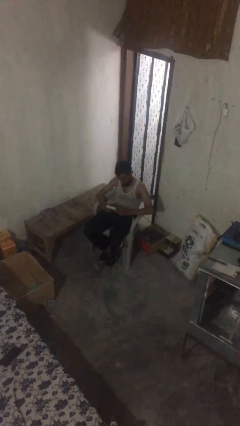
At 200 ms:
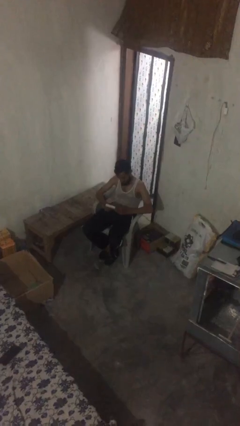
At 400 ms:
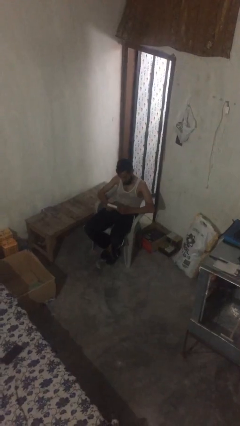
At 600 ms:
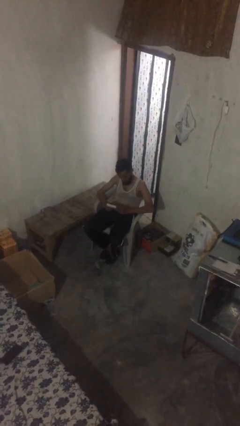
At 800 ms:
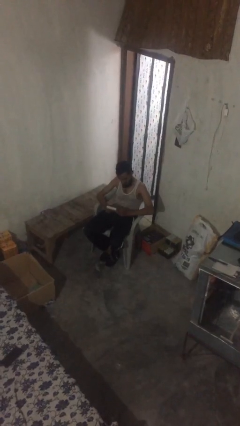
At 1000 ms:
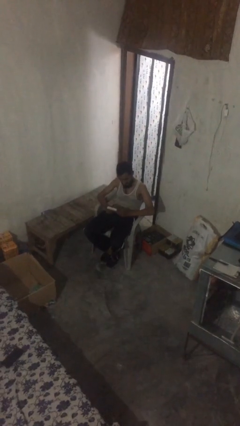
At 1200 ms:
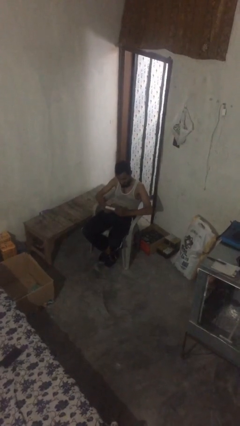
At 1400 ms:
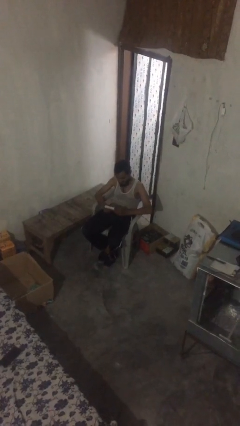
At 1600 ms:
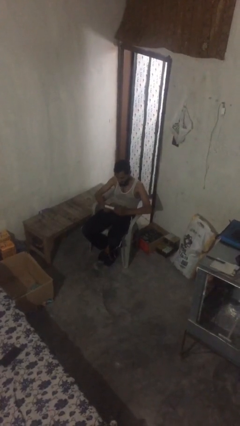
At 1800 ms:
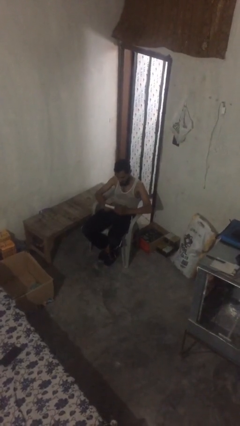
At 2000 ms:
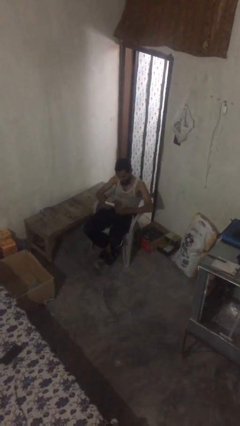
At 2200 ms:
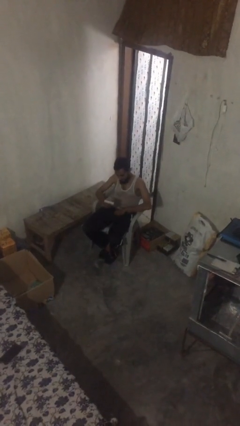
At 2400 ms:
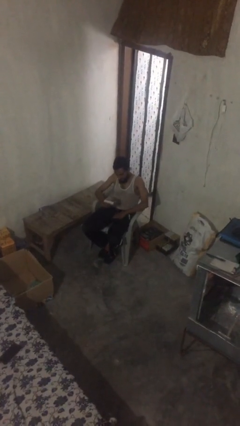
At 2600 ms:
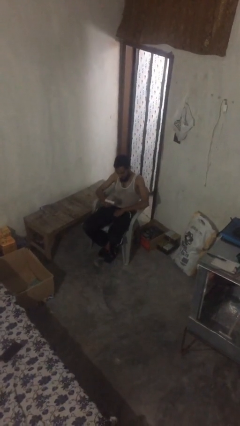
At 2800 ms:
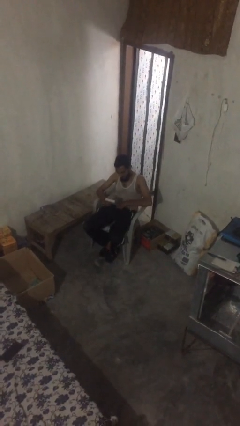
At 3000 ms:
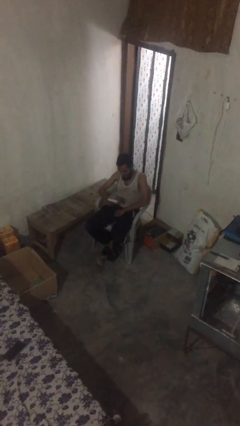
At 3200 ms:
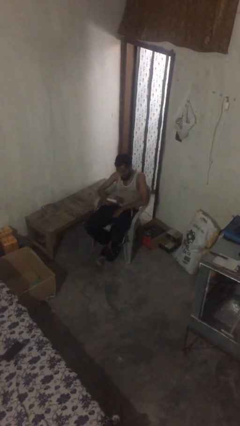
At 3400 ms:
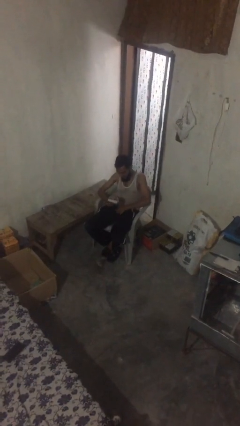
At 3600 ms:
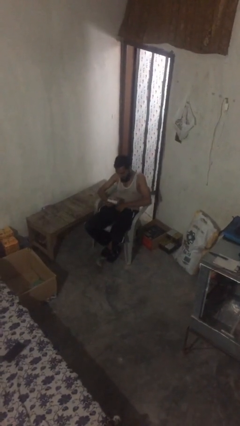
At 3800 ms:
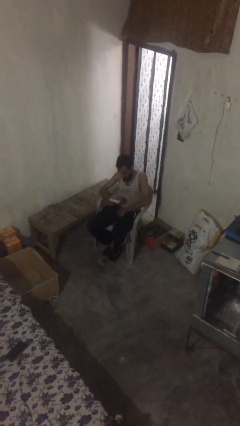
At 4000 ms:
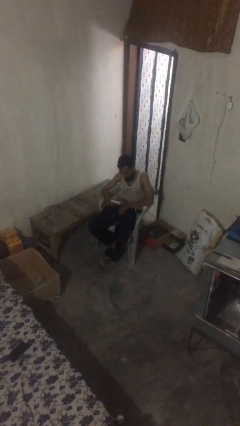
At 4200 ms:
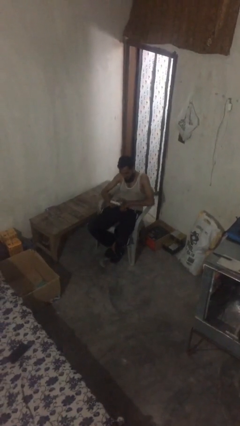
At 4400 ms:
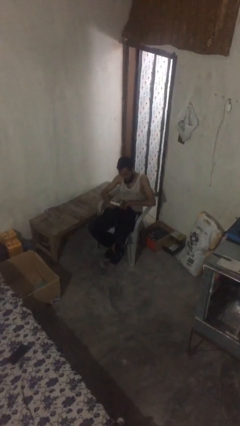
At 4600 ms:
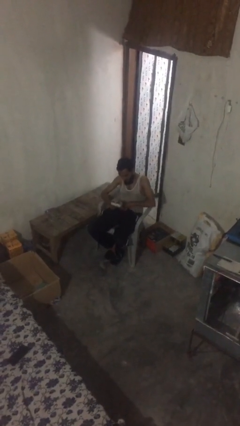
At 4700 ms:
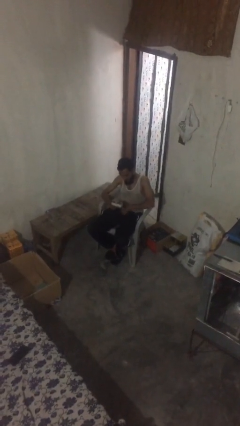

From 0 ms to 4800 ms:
person reads document

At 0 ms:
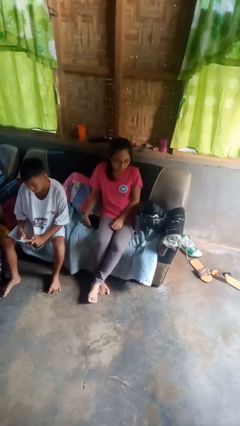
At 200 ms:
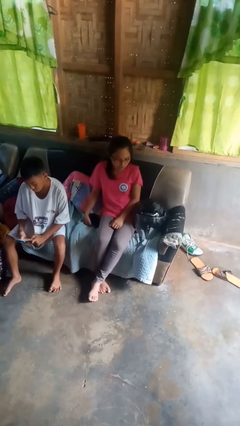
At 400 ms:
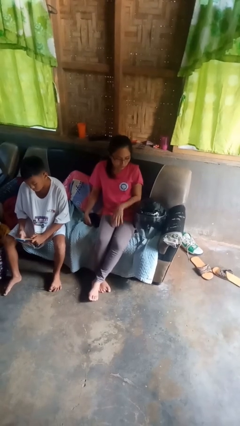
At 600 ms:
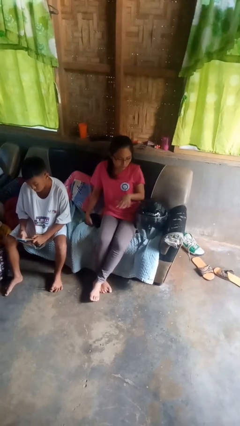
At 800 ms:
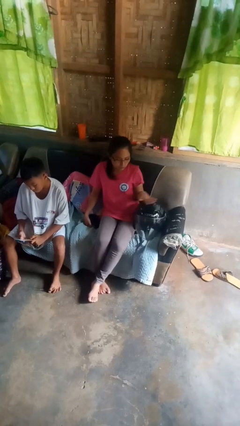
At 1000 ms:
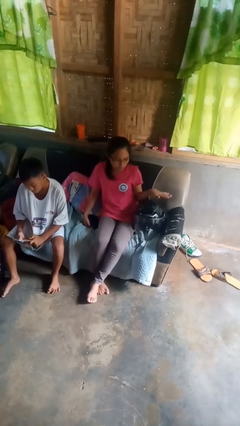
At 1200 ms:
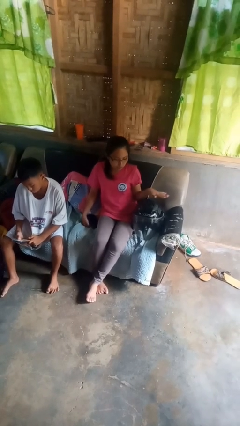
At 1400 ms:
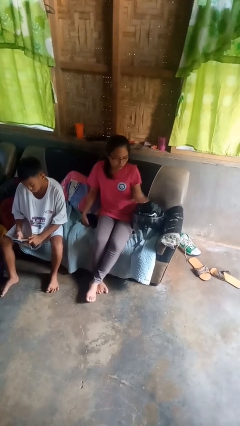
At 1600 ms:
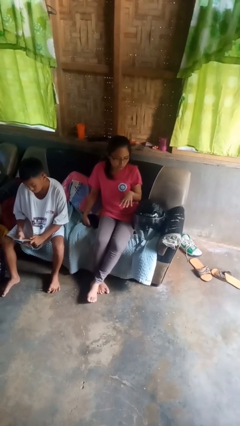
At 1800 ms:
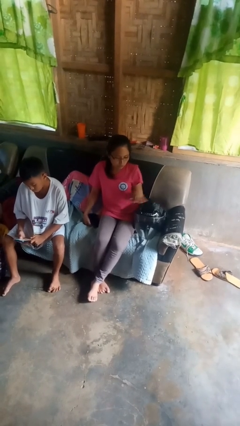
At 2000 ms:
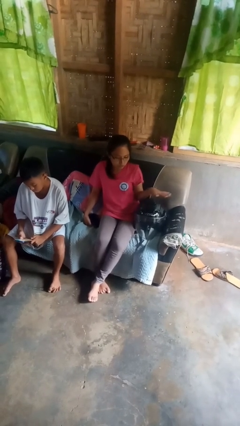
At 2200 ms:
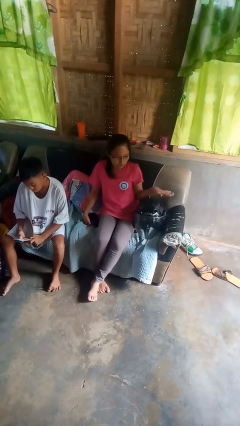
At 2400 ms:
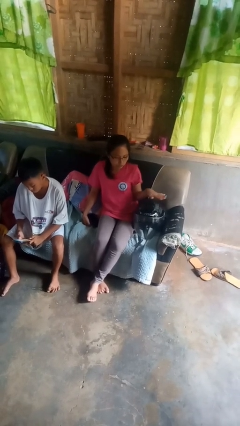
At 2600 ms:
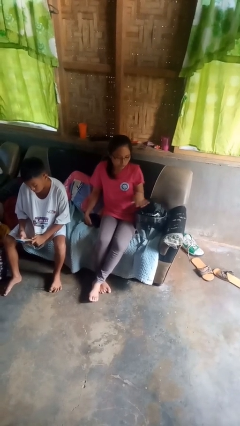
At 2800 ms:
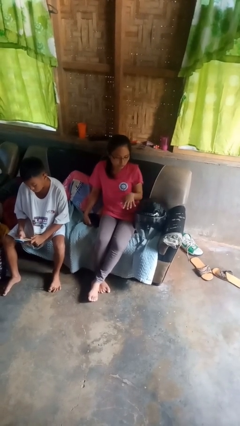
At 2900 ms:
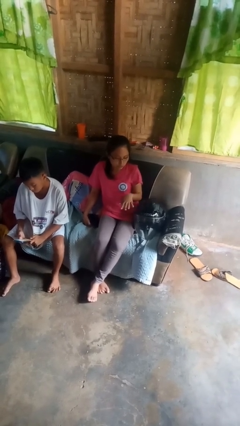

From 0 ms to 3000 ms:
person waves hand over object

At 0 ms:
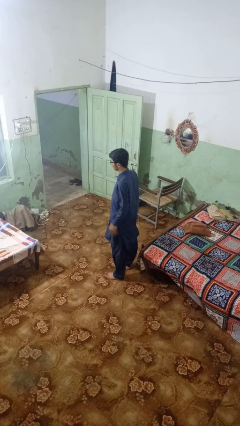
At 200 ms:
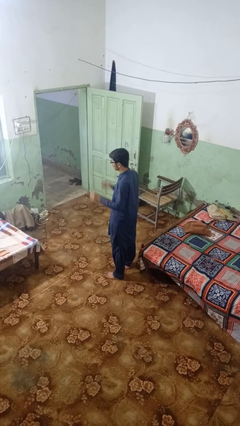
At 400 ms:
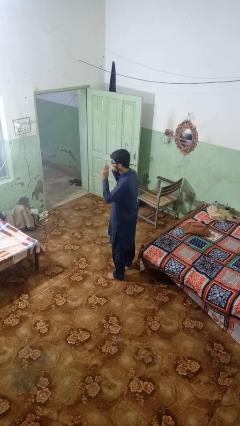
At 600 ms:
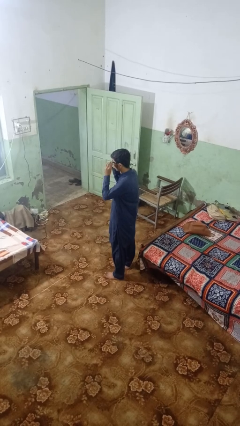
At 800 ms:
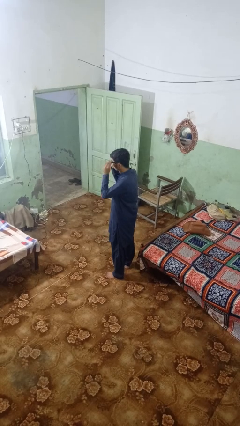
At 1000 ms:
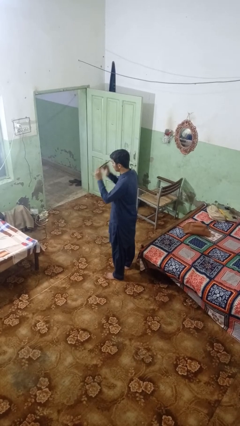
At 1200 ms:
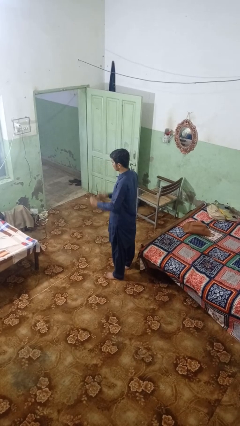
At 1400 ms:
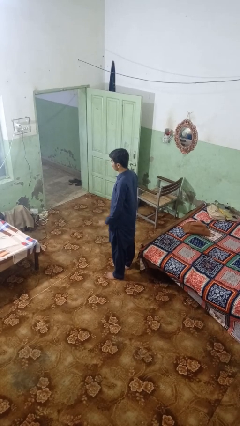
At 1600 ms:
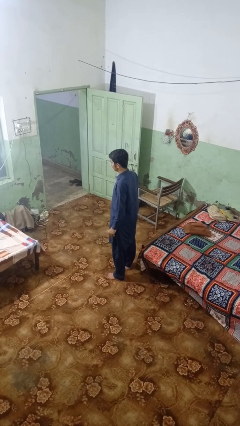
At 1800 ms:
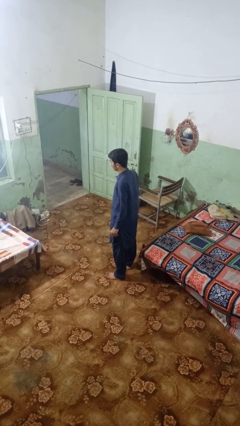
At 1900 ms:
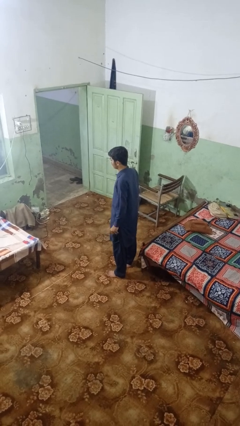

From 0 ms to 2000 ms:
person takes off glasses

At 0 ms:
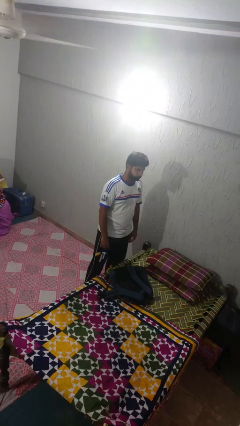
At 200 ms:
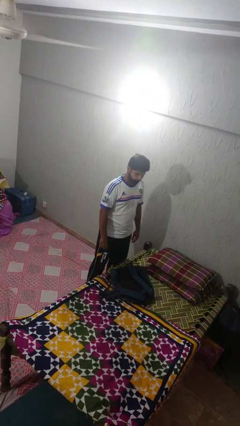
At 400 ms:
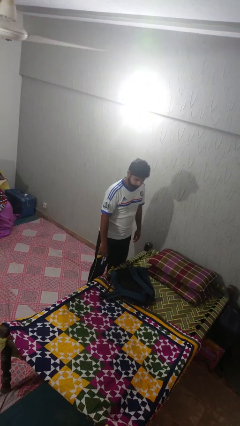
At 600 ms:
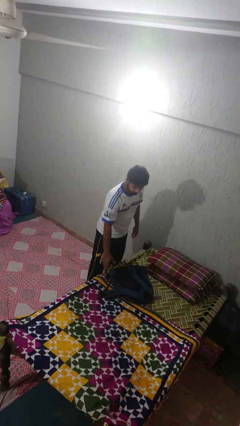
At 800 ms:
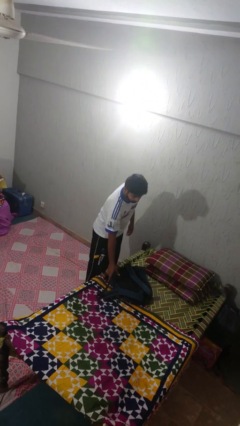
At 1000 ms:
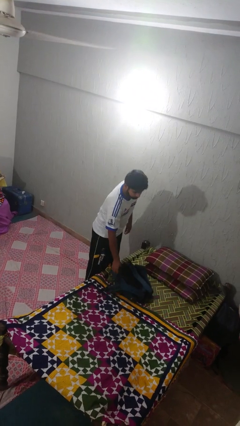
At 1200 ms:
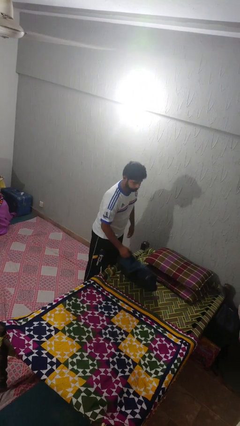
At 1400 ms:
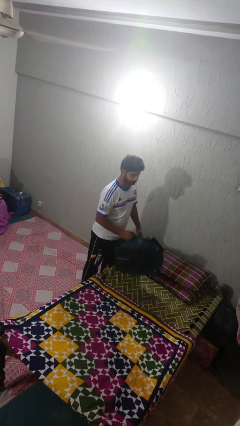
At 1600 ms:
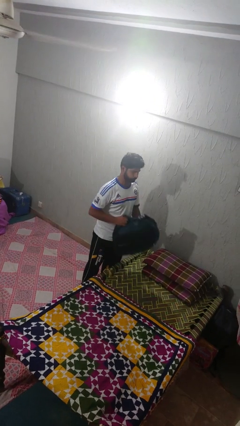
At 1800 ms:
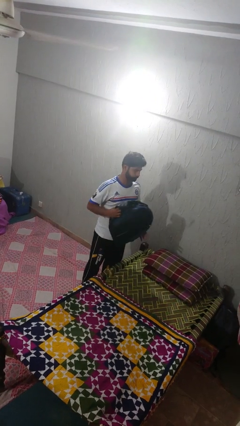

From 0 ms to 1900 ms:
person picks up object from bed

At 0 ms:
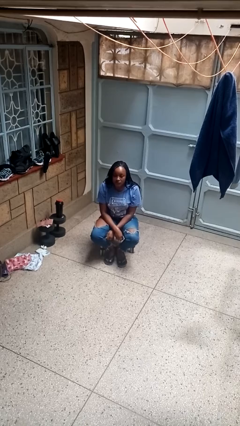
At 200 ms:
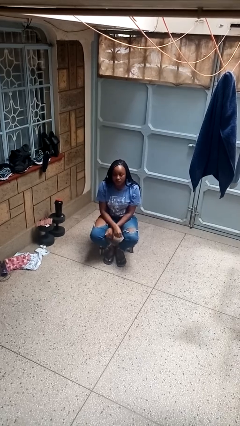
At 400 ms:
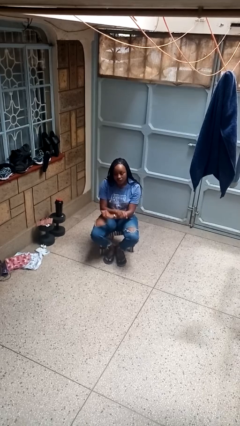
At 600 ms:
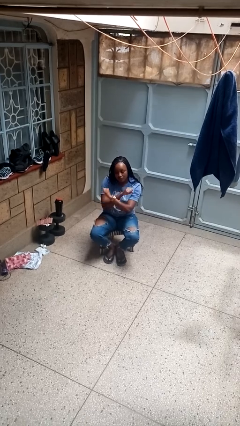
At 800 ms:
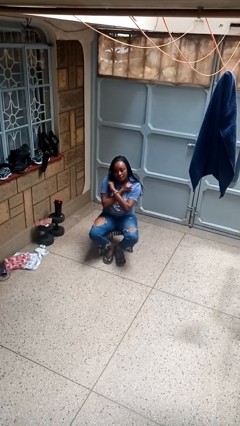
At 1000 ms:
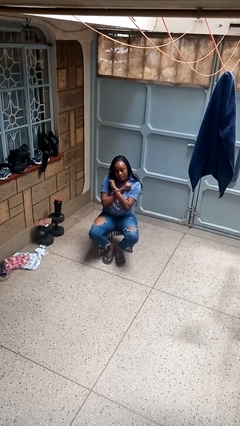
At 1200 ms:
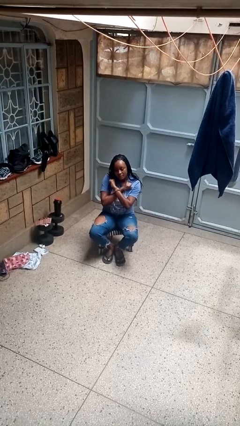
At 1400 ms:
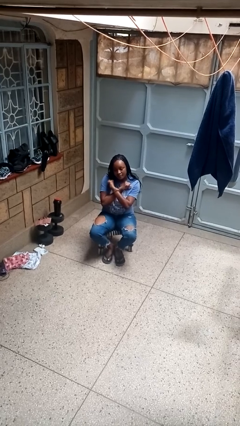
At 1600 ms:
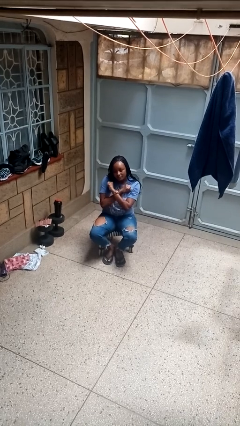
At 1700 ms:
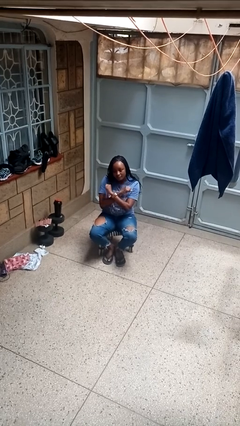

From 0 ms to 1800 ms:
person gestures arms x

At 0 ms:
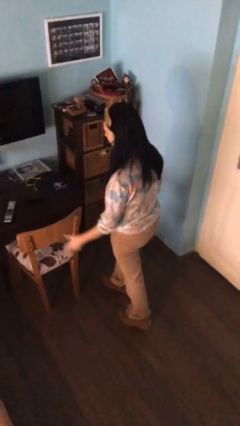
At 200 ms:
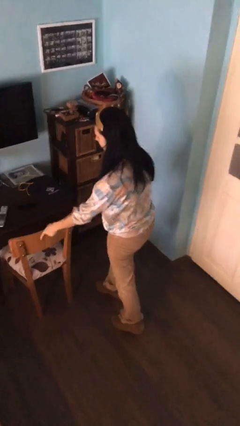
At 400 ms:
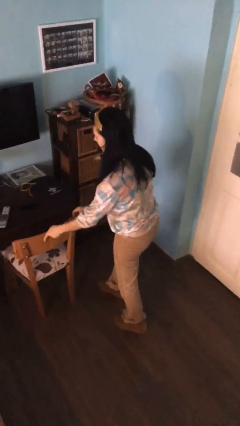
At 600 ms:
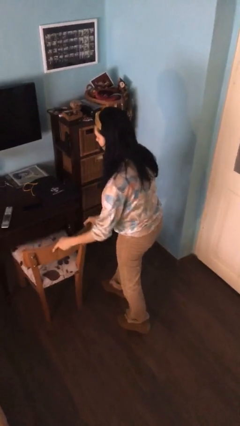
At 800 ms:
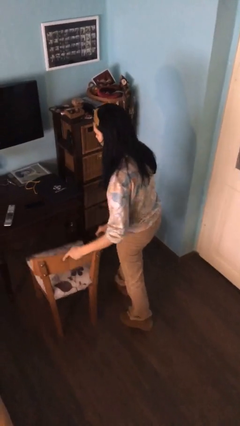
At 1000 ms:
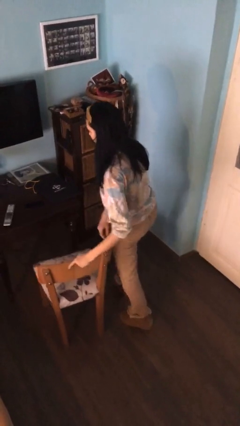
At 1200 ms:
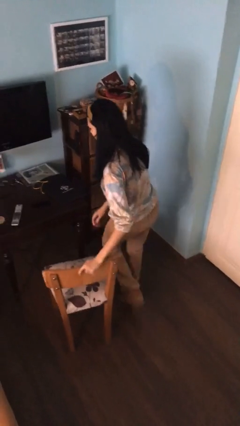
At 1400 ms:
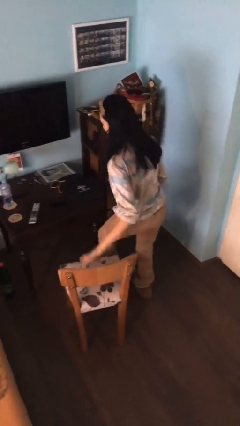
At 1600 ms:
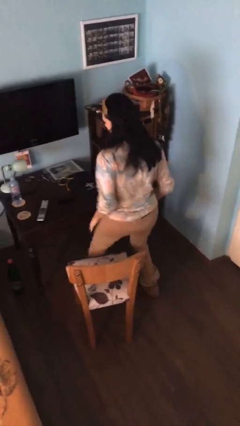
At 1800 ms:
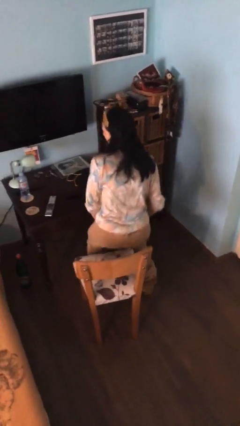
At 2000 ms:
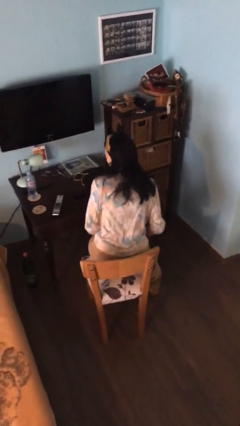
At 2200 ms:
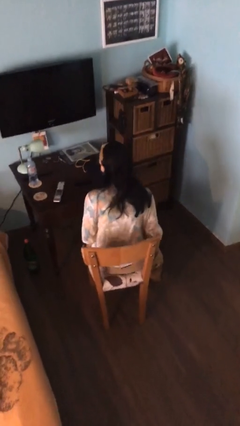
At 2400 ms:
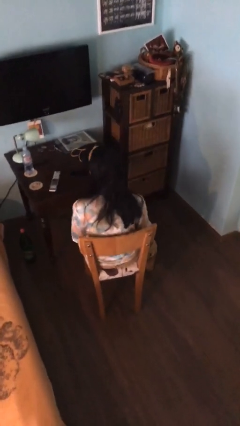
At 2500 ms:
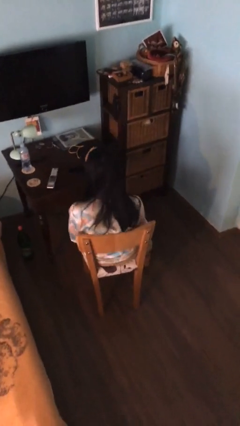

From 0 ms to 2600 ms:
person sits down

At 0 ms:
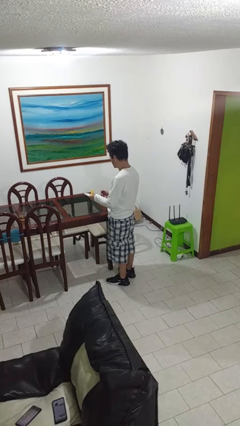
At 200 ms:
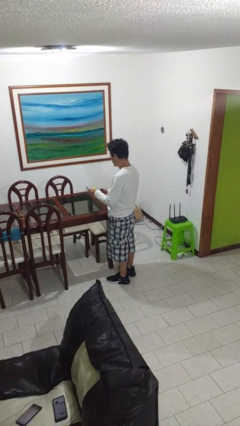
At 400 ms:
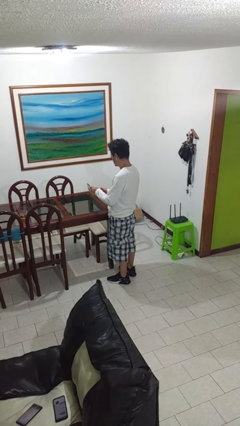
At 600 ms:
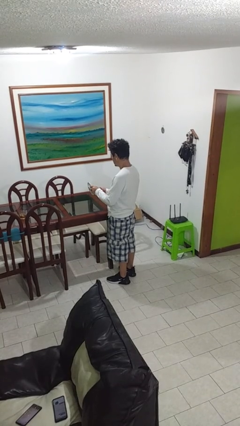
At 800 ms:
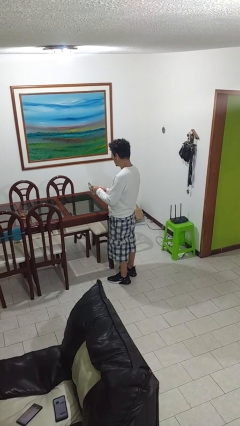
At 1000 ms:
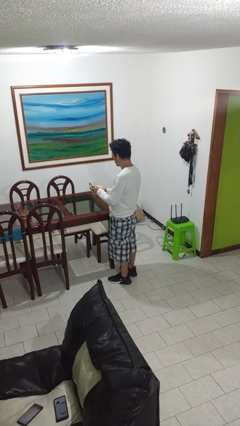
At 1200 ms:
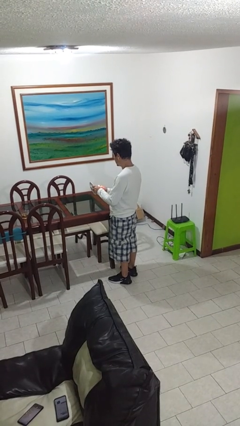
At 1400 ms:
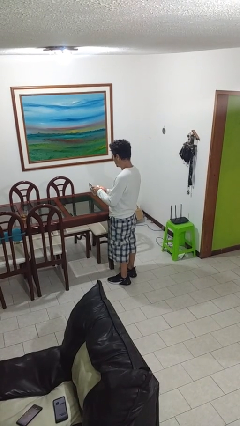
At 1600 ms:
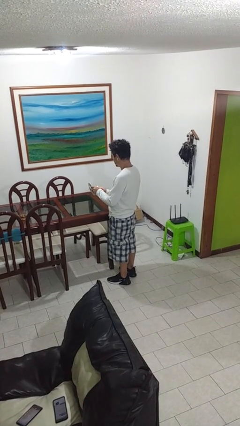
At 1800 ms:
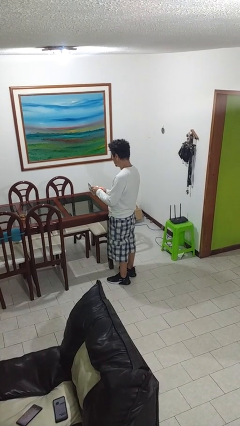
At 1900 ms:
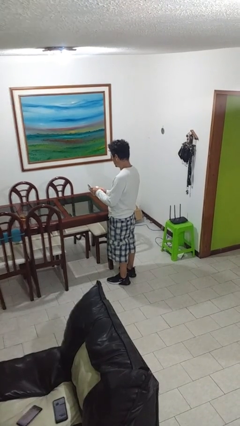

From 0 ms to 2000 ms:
person lights candle
